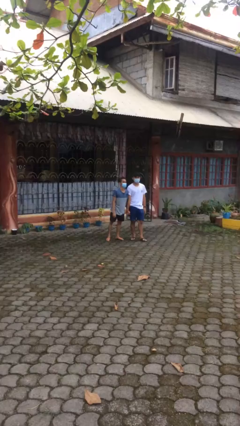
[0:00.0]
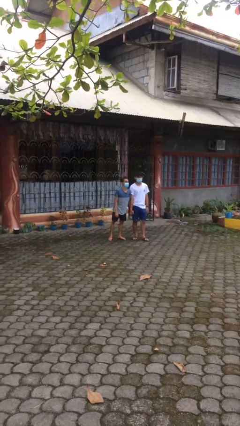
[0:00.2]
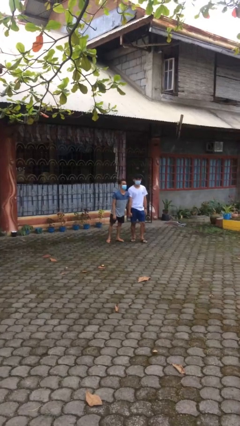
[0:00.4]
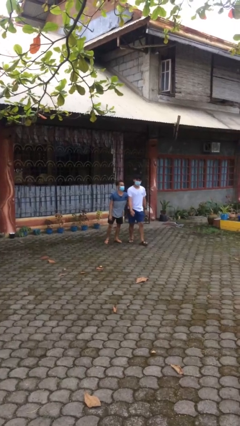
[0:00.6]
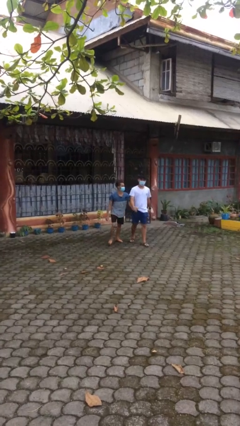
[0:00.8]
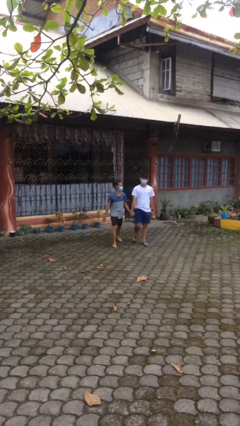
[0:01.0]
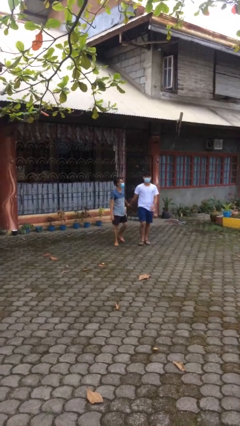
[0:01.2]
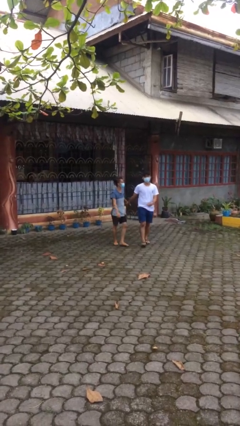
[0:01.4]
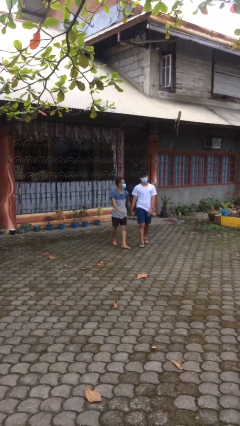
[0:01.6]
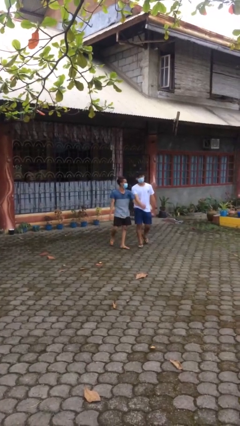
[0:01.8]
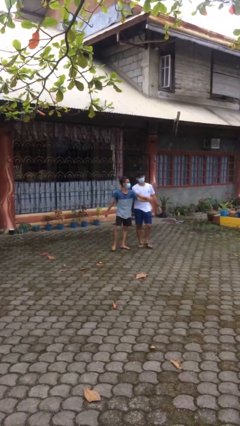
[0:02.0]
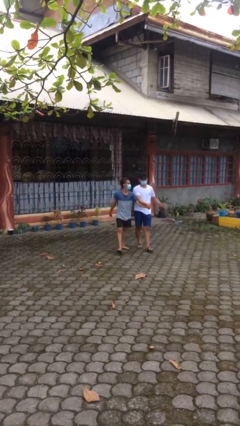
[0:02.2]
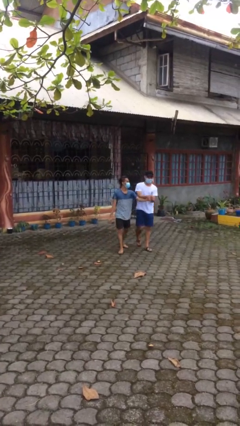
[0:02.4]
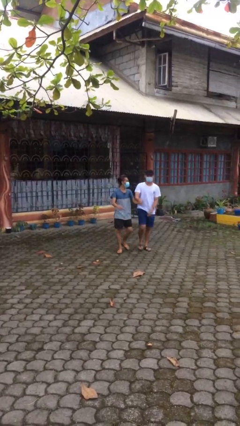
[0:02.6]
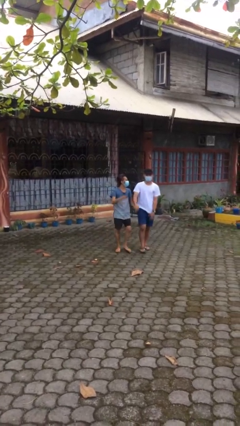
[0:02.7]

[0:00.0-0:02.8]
person holds hand

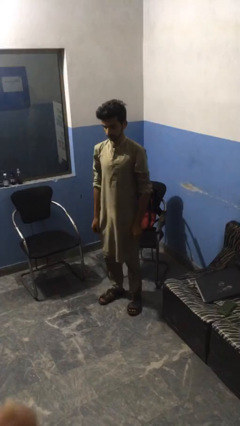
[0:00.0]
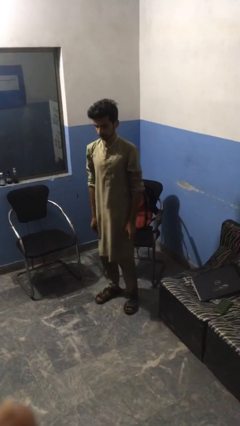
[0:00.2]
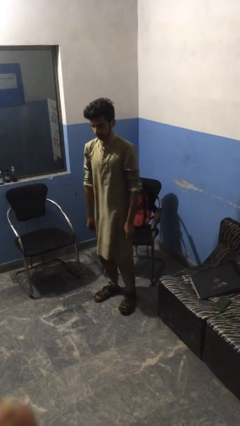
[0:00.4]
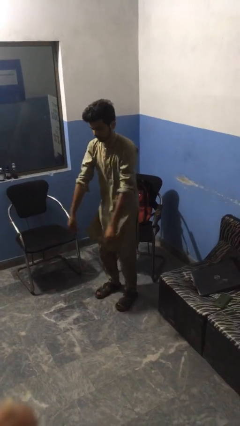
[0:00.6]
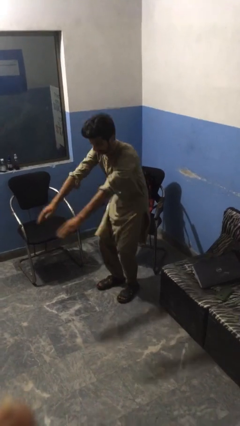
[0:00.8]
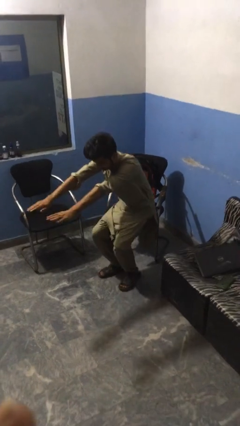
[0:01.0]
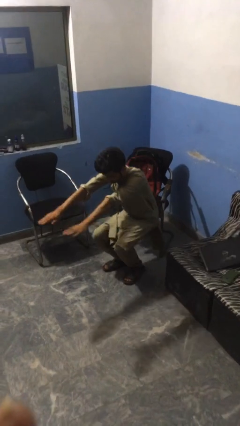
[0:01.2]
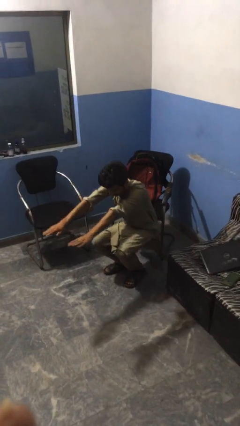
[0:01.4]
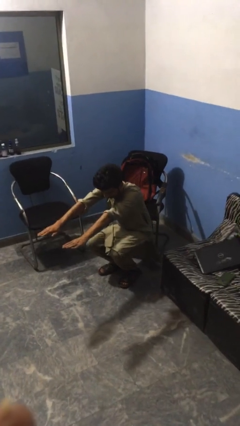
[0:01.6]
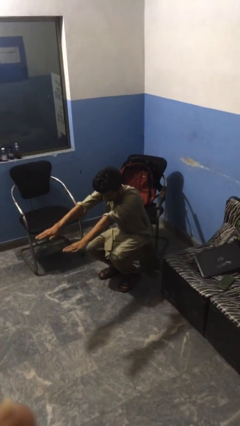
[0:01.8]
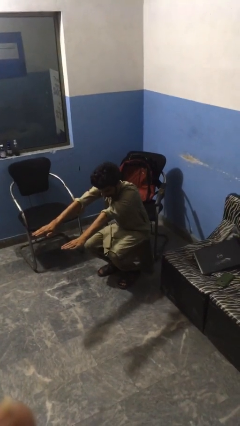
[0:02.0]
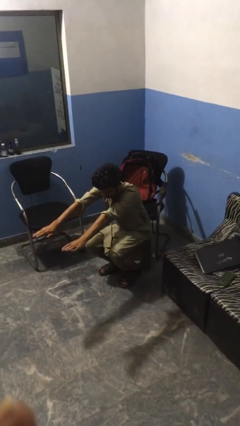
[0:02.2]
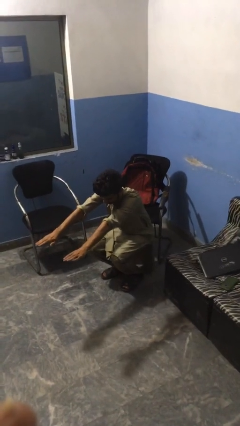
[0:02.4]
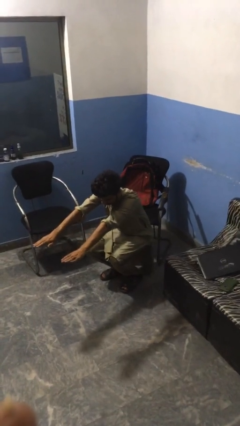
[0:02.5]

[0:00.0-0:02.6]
person squats

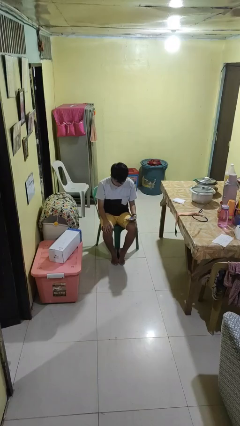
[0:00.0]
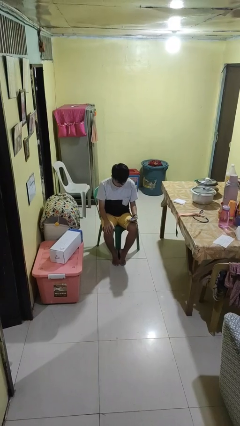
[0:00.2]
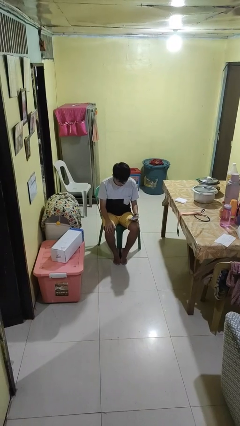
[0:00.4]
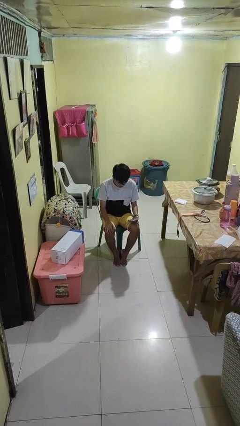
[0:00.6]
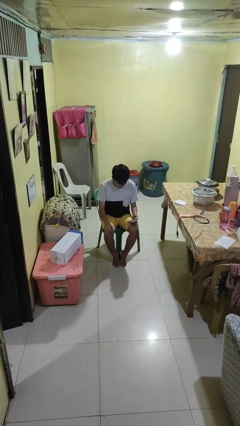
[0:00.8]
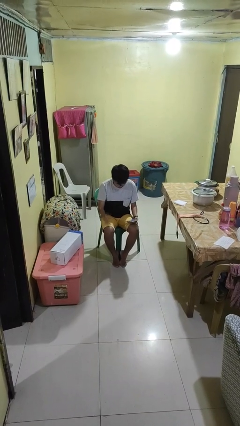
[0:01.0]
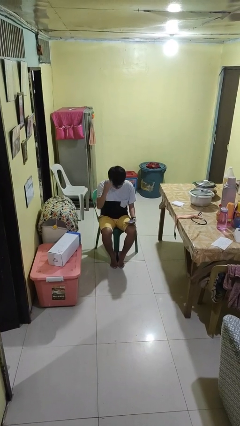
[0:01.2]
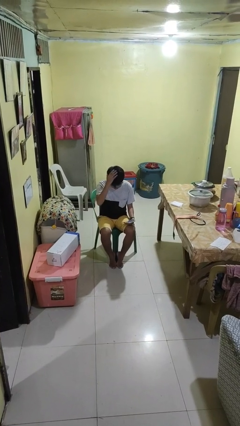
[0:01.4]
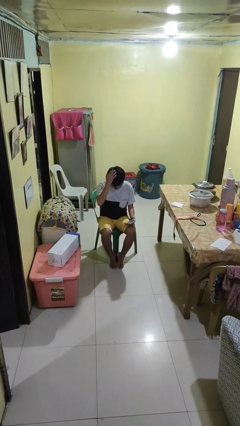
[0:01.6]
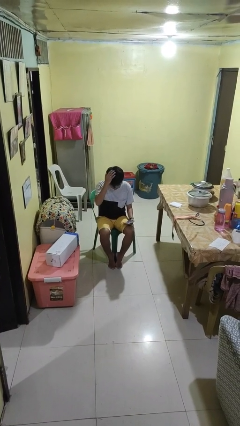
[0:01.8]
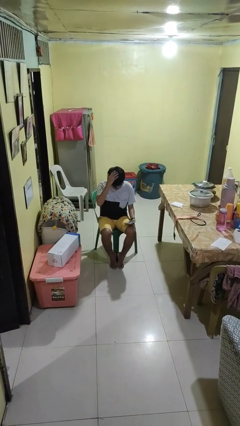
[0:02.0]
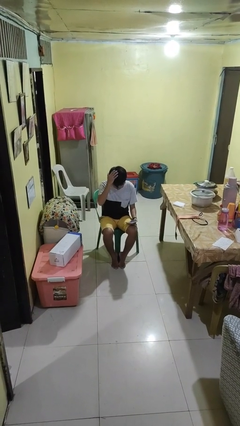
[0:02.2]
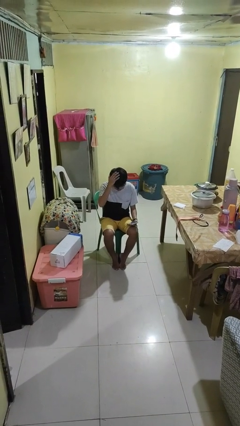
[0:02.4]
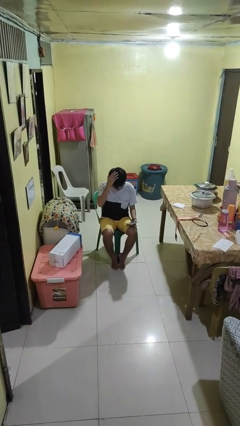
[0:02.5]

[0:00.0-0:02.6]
person pats head

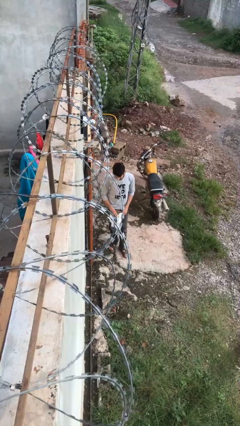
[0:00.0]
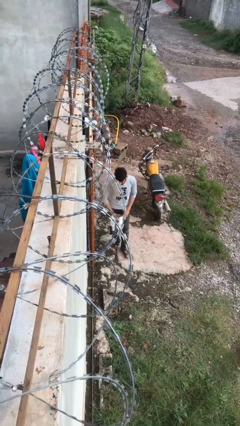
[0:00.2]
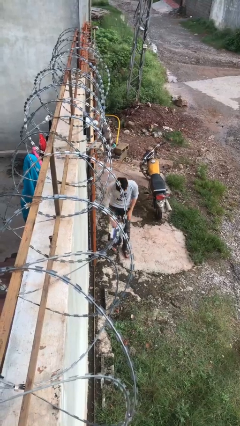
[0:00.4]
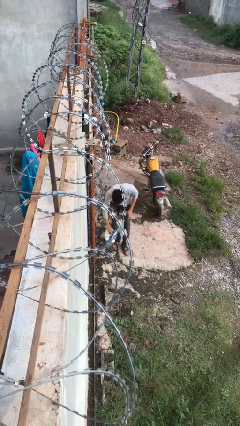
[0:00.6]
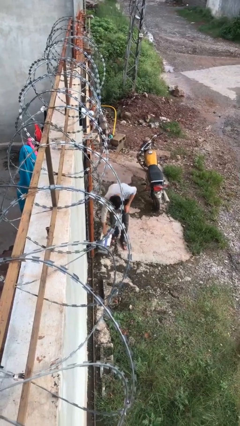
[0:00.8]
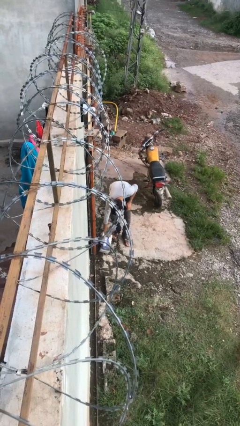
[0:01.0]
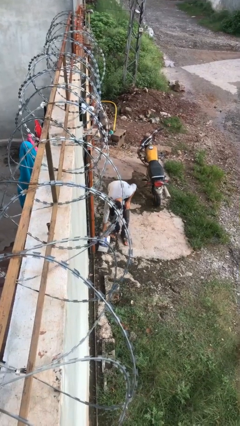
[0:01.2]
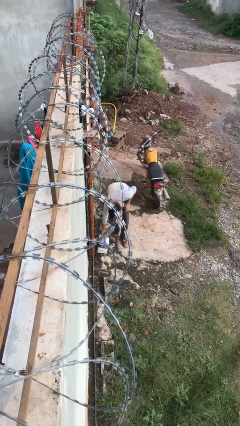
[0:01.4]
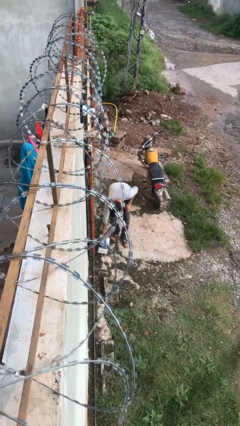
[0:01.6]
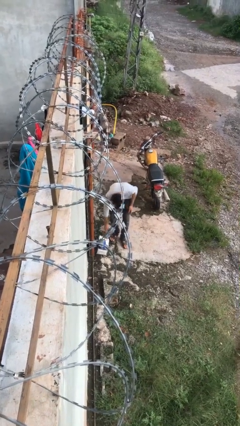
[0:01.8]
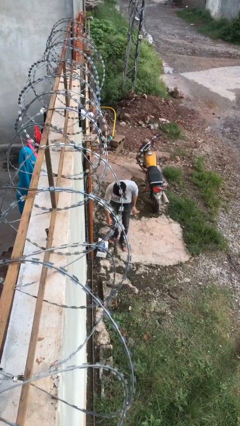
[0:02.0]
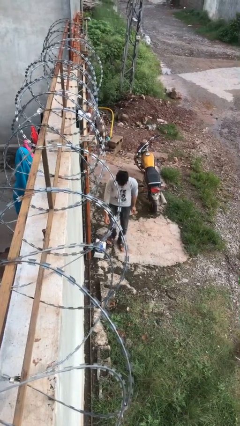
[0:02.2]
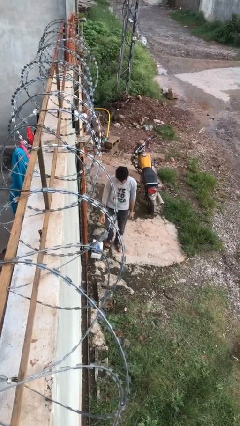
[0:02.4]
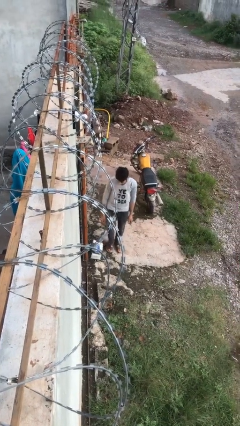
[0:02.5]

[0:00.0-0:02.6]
person puts down object on floor

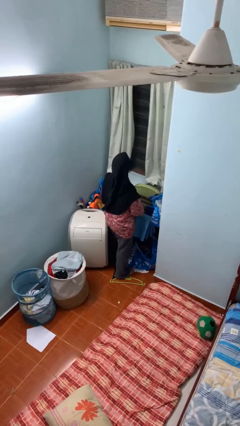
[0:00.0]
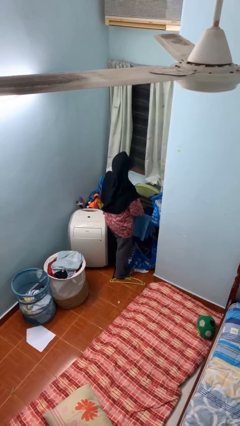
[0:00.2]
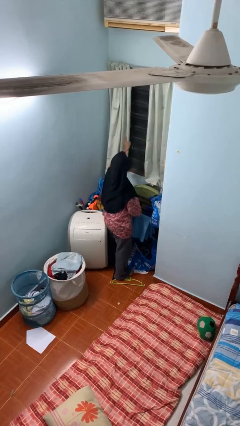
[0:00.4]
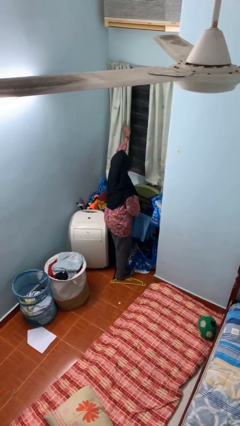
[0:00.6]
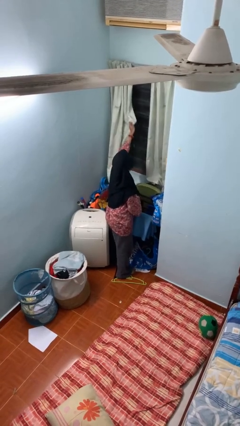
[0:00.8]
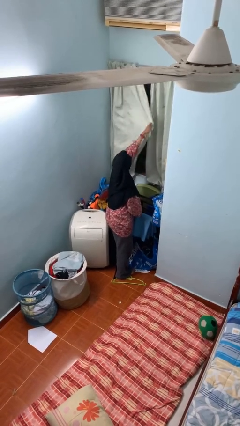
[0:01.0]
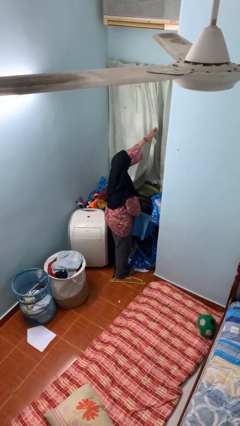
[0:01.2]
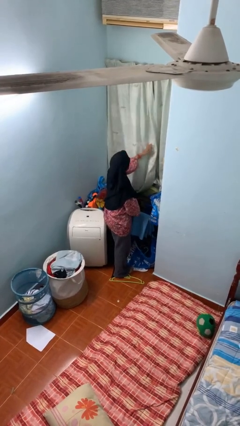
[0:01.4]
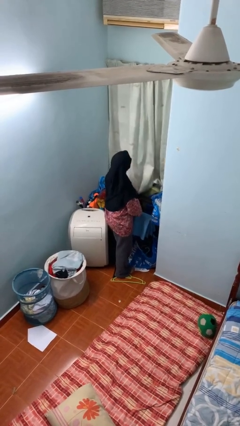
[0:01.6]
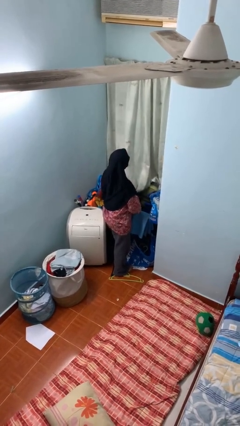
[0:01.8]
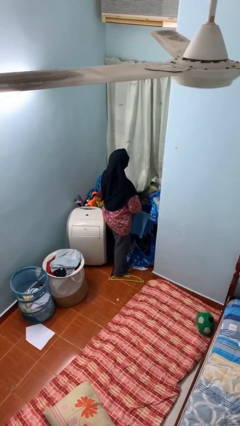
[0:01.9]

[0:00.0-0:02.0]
person closes curtains

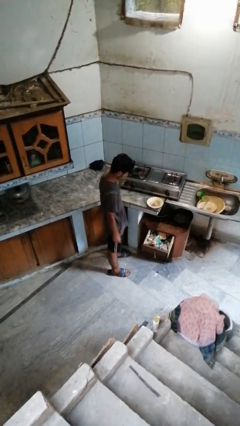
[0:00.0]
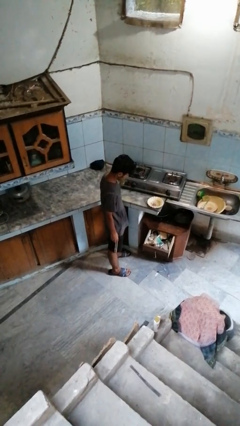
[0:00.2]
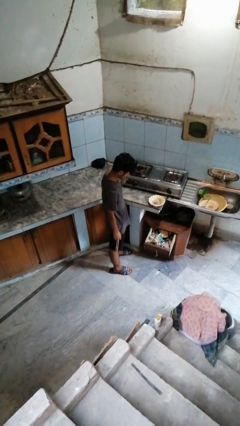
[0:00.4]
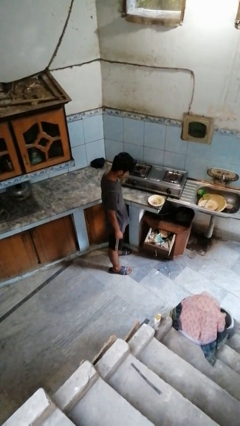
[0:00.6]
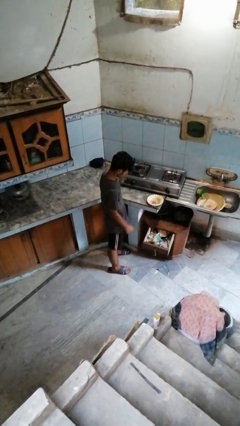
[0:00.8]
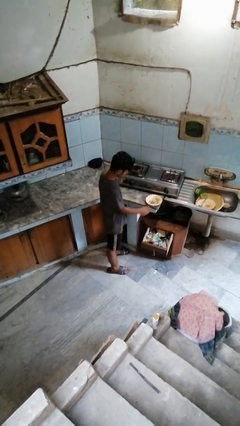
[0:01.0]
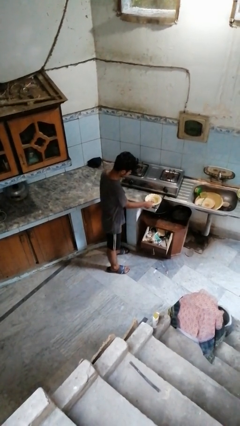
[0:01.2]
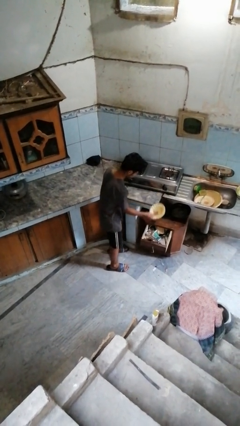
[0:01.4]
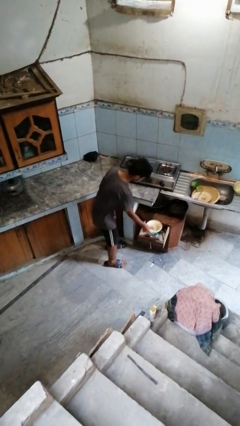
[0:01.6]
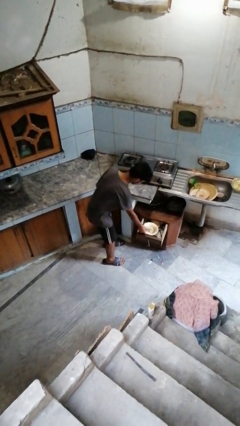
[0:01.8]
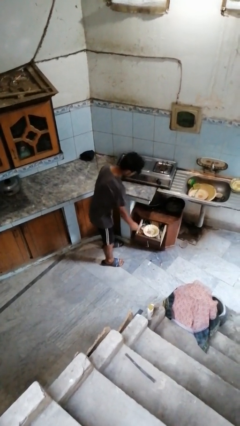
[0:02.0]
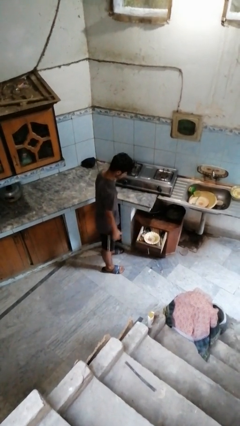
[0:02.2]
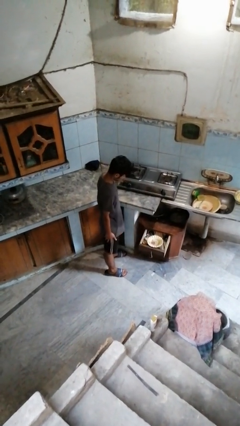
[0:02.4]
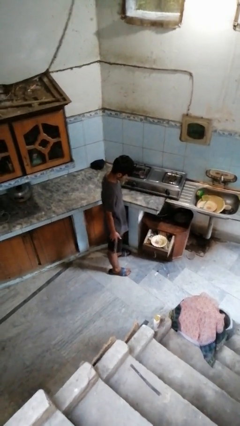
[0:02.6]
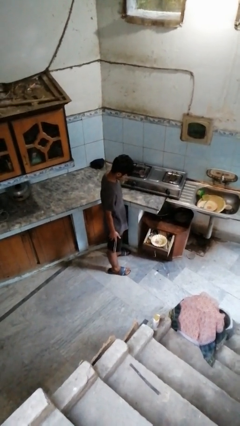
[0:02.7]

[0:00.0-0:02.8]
person puts object into kitchen drawer

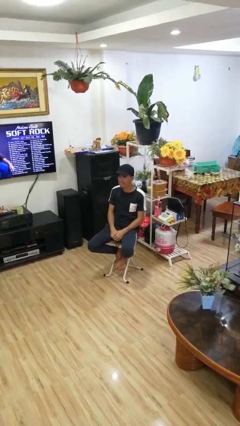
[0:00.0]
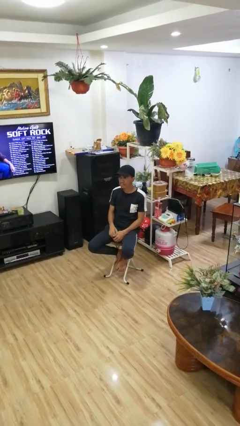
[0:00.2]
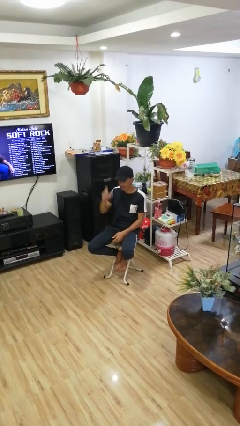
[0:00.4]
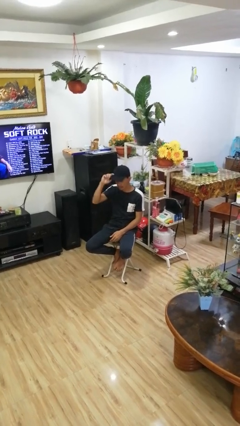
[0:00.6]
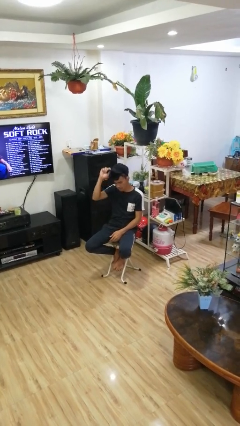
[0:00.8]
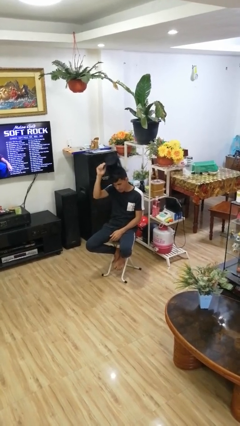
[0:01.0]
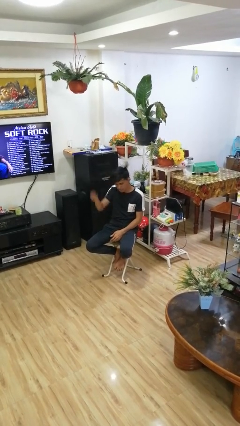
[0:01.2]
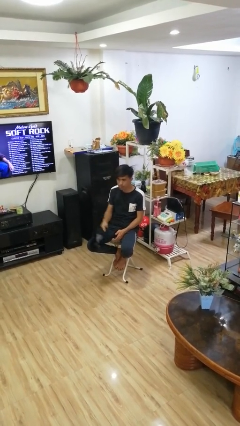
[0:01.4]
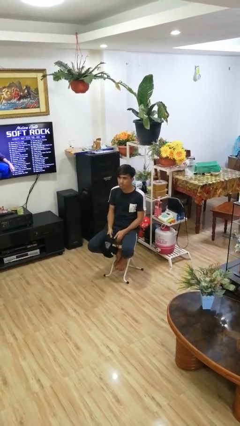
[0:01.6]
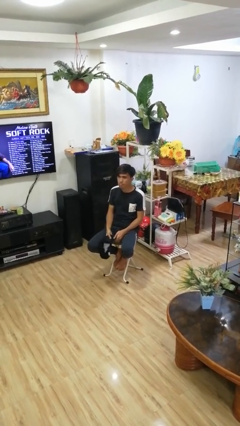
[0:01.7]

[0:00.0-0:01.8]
person takes off hat
